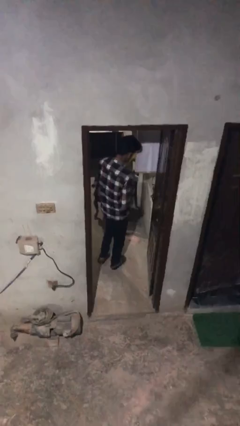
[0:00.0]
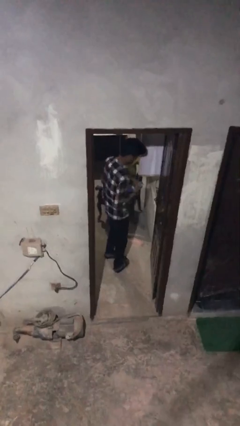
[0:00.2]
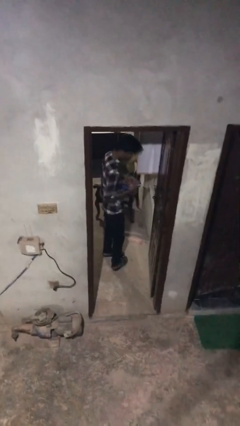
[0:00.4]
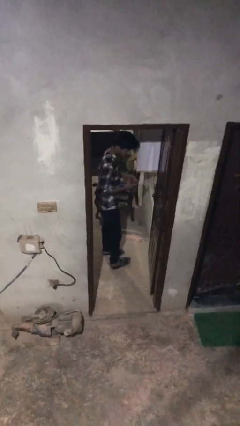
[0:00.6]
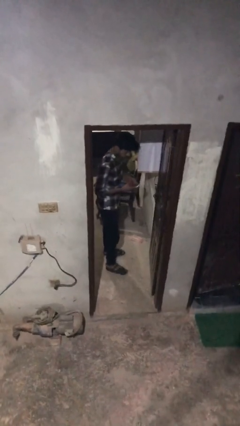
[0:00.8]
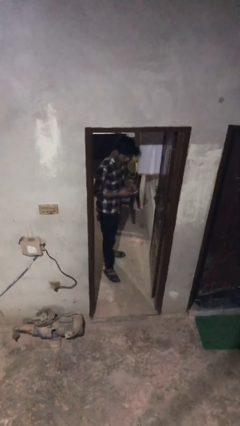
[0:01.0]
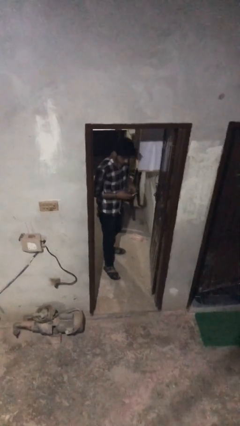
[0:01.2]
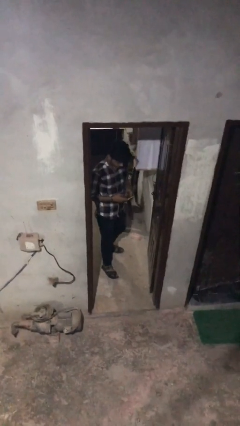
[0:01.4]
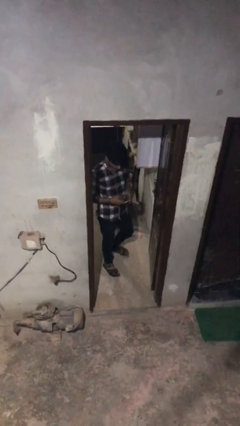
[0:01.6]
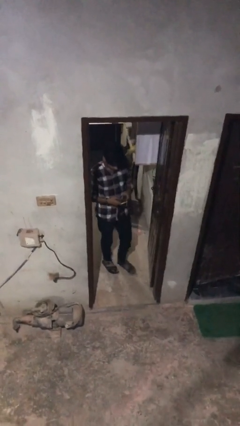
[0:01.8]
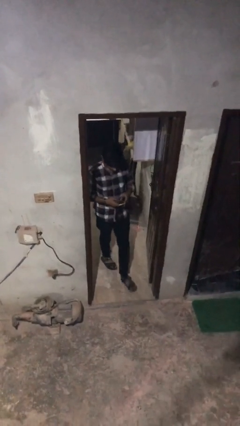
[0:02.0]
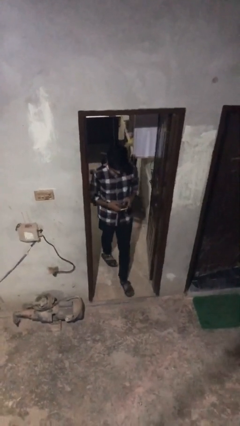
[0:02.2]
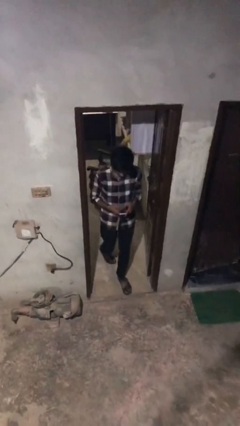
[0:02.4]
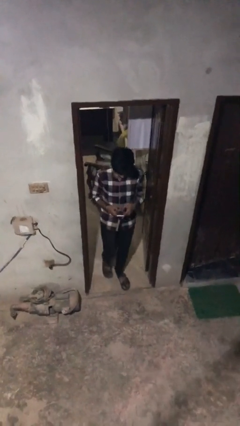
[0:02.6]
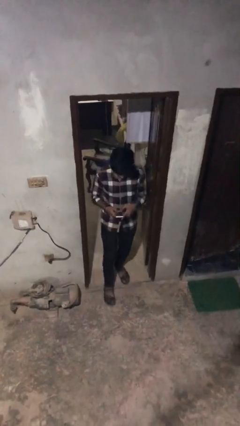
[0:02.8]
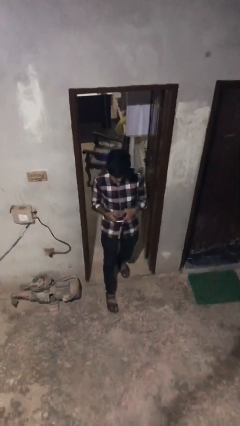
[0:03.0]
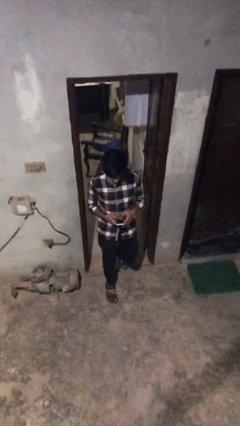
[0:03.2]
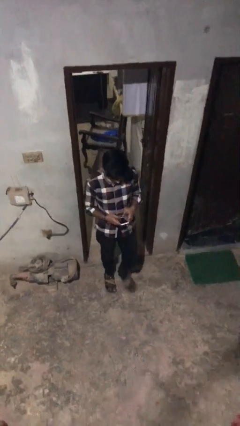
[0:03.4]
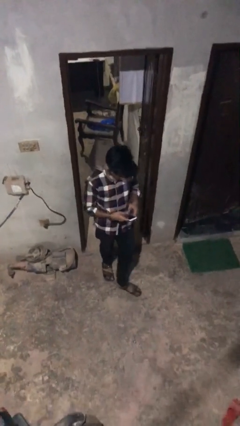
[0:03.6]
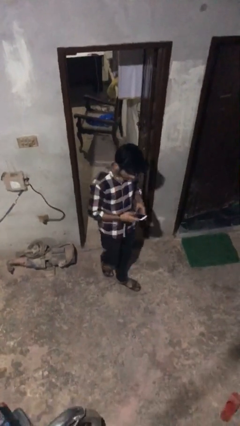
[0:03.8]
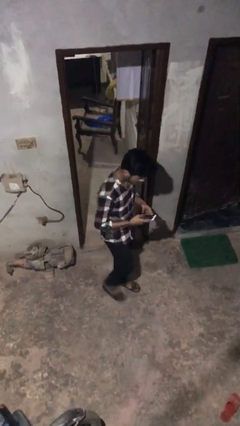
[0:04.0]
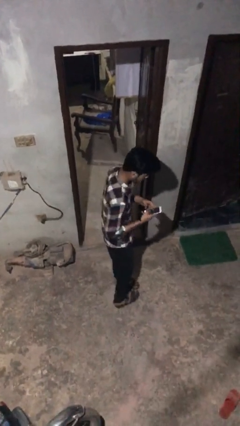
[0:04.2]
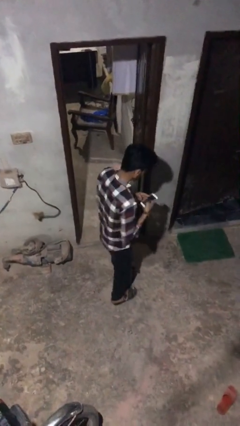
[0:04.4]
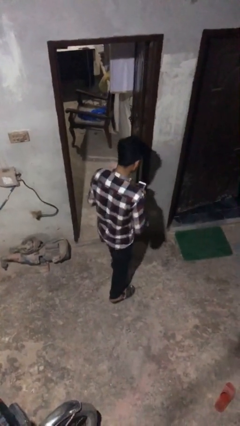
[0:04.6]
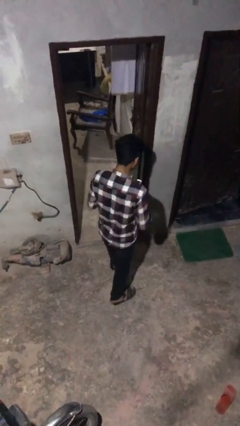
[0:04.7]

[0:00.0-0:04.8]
person enters scene through structure

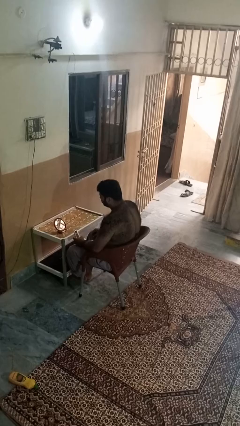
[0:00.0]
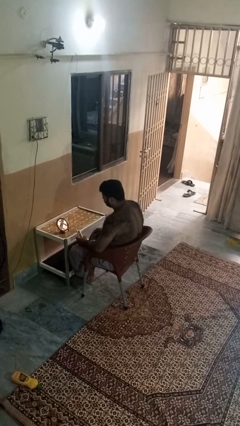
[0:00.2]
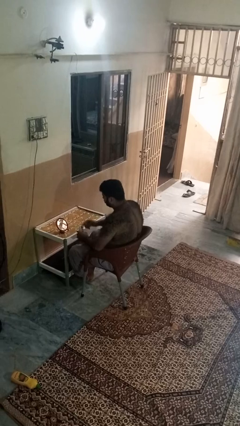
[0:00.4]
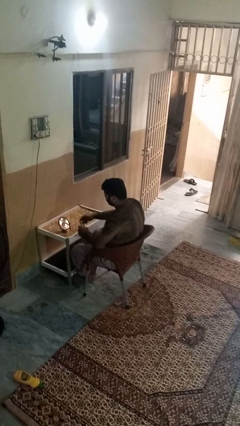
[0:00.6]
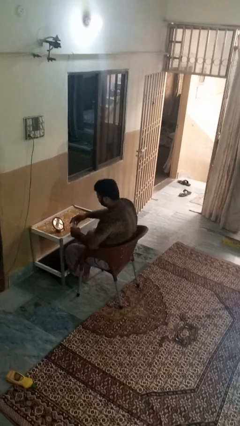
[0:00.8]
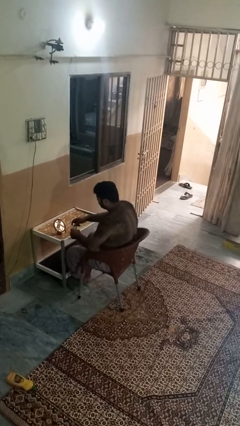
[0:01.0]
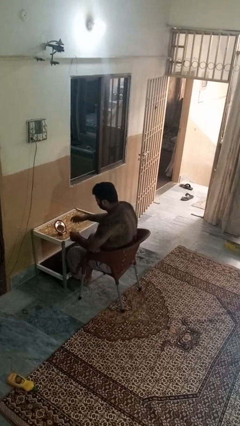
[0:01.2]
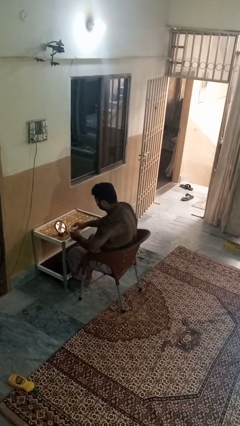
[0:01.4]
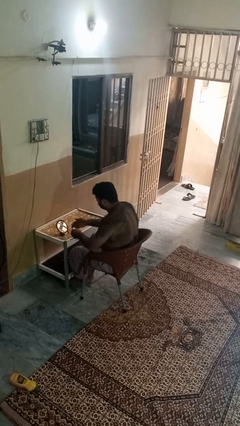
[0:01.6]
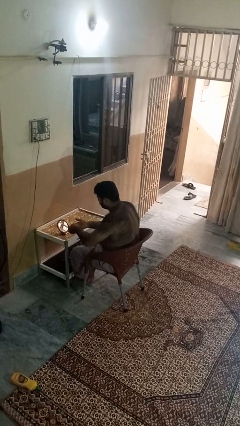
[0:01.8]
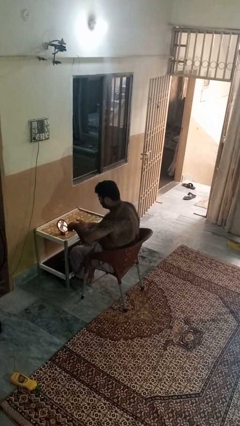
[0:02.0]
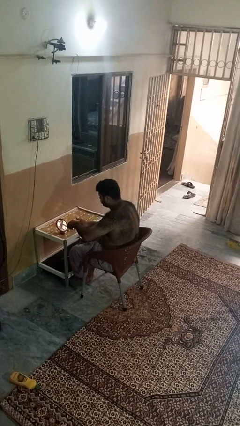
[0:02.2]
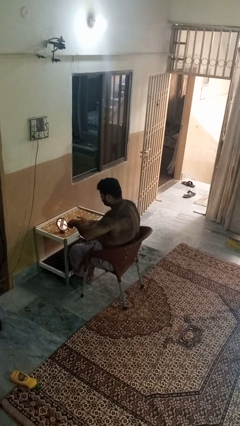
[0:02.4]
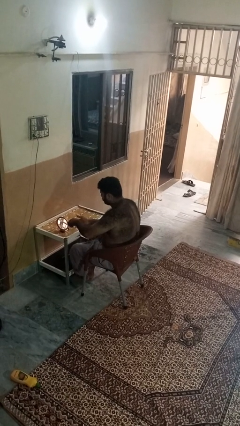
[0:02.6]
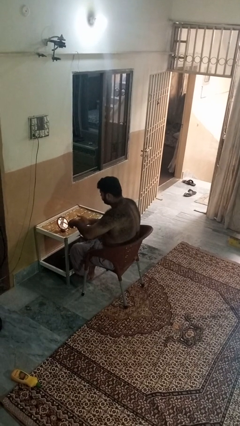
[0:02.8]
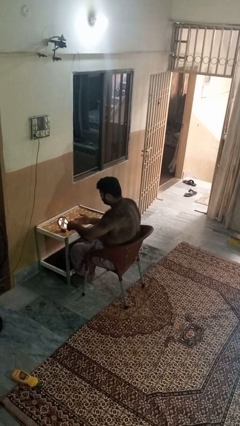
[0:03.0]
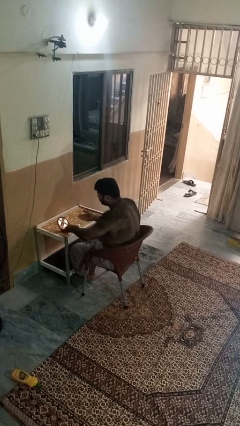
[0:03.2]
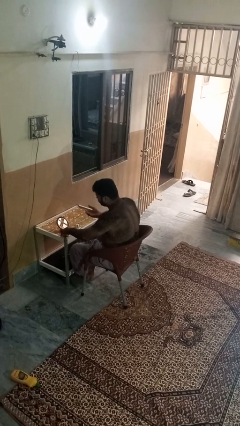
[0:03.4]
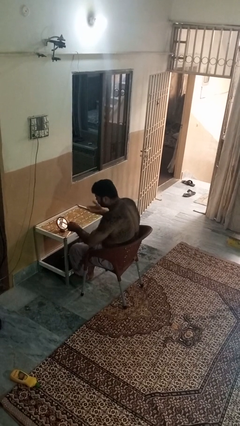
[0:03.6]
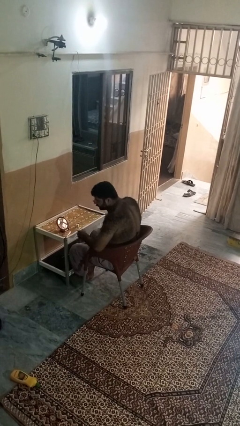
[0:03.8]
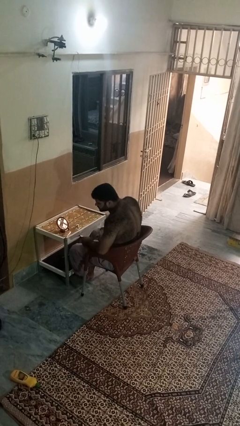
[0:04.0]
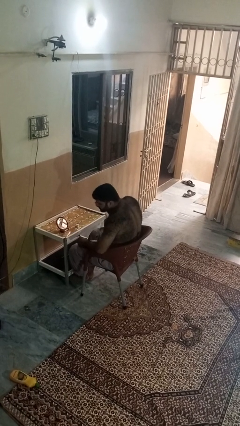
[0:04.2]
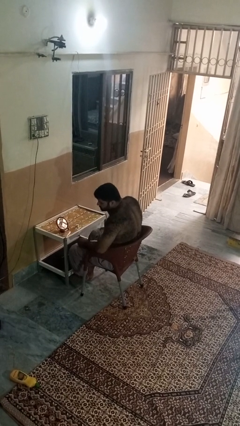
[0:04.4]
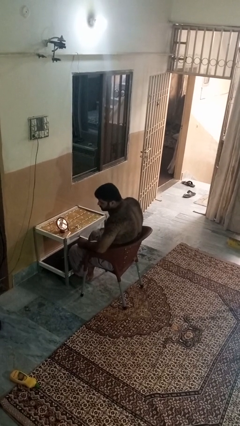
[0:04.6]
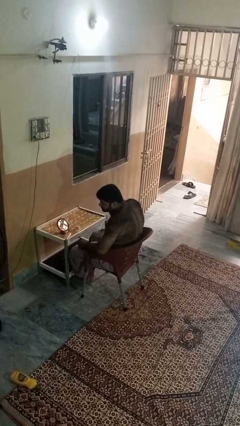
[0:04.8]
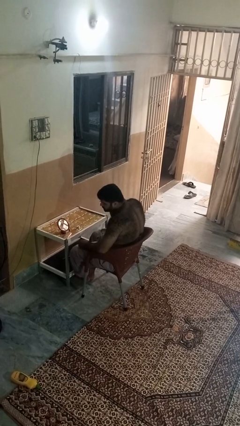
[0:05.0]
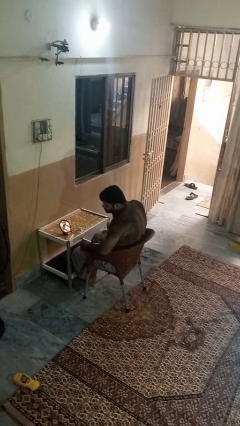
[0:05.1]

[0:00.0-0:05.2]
person applies foundation makeup

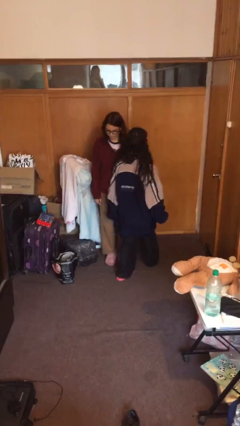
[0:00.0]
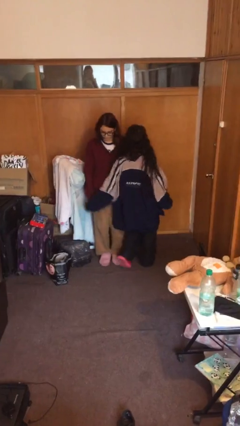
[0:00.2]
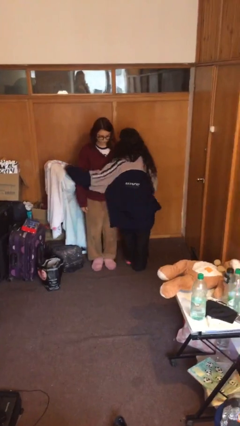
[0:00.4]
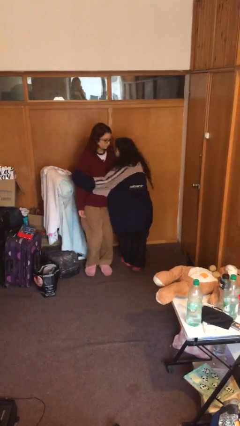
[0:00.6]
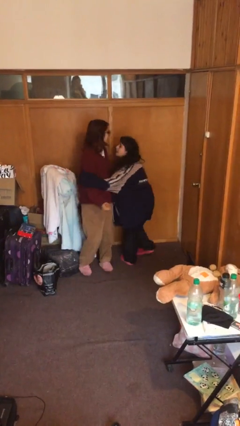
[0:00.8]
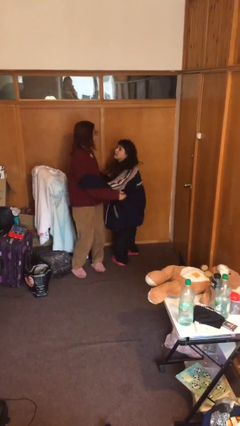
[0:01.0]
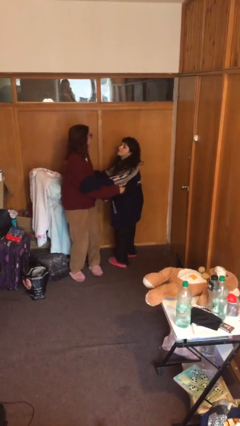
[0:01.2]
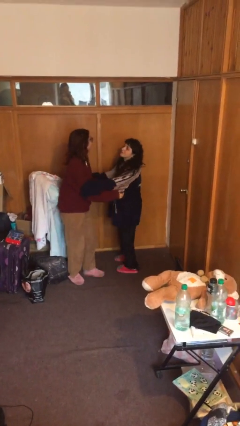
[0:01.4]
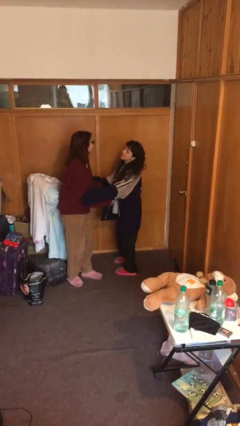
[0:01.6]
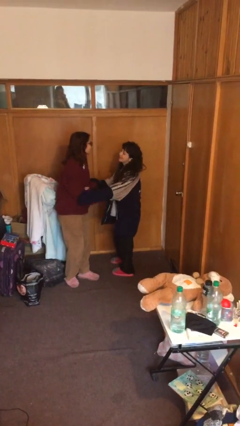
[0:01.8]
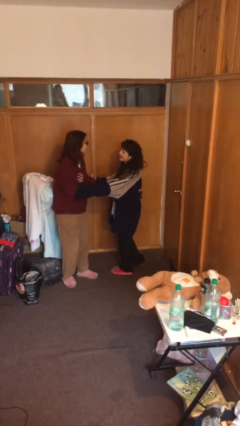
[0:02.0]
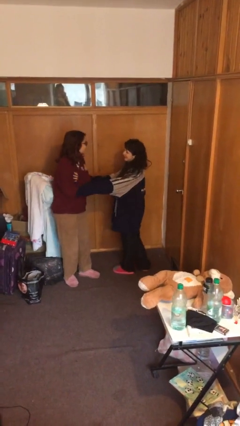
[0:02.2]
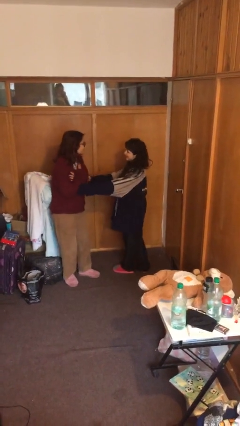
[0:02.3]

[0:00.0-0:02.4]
person bumps into person

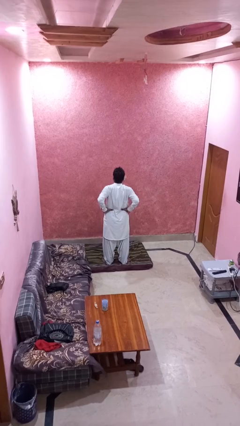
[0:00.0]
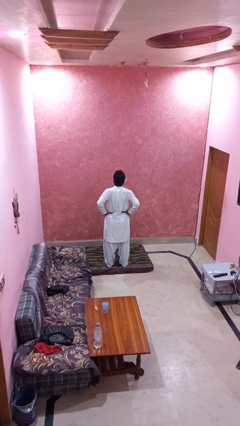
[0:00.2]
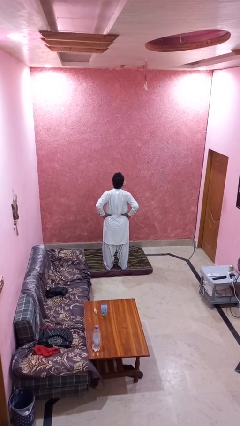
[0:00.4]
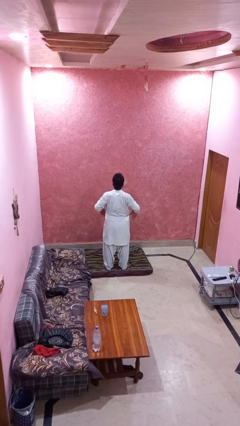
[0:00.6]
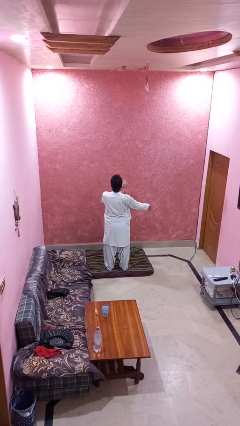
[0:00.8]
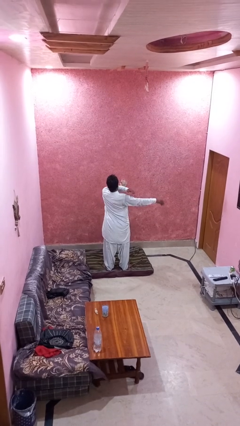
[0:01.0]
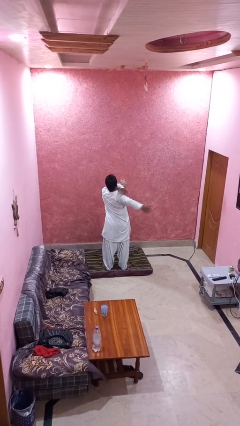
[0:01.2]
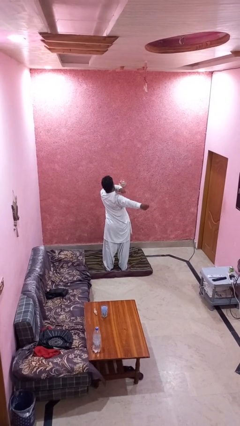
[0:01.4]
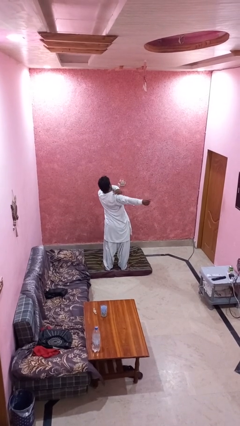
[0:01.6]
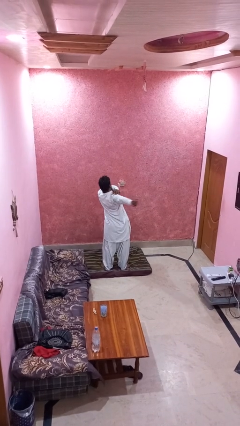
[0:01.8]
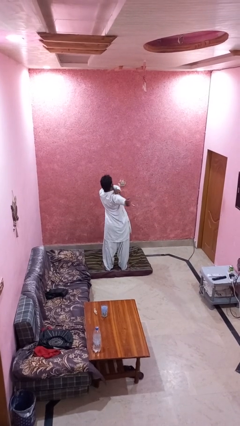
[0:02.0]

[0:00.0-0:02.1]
person stretches arms to side

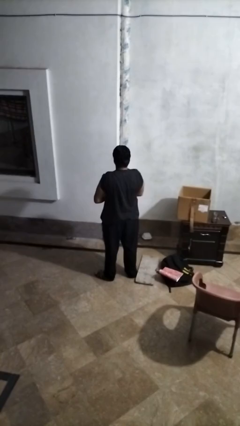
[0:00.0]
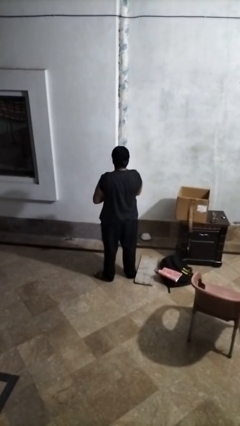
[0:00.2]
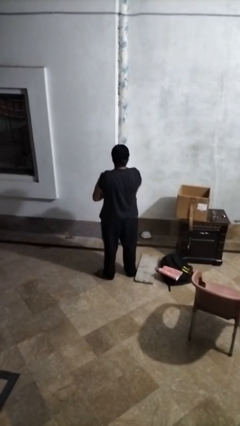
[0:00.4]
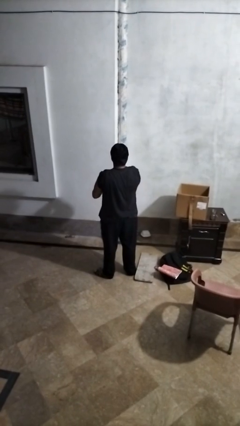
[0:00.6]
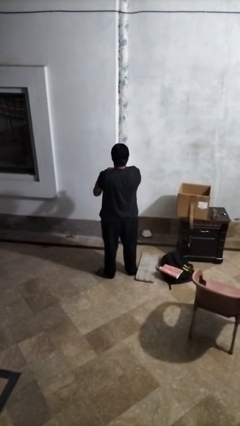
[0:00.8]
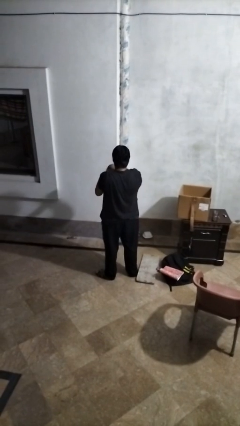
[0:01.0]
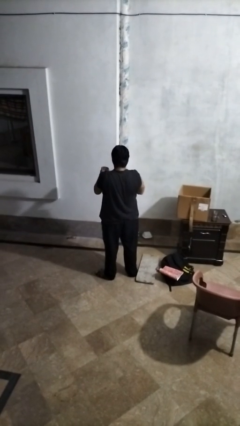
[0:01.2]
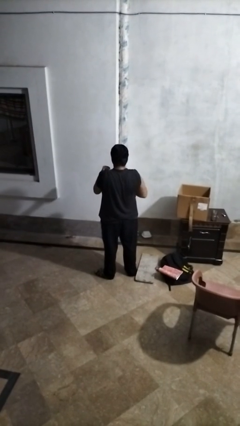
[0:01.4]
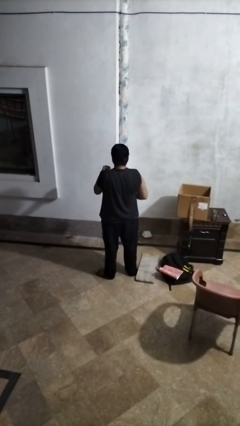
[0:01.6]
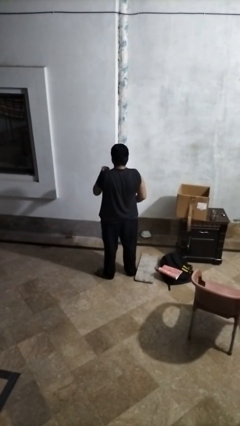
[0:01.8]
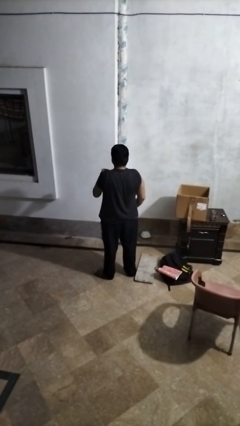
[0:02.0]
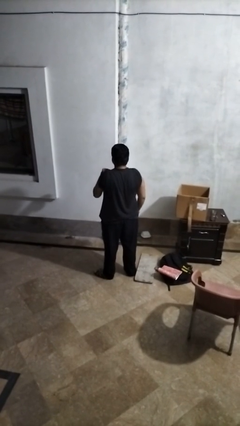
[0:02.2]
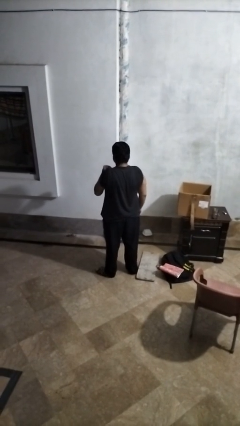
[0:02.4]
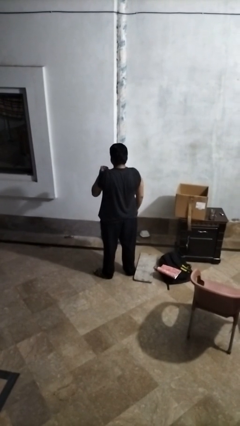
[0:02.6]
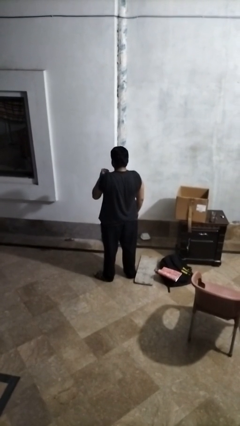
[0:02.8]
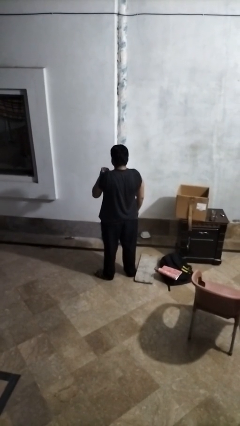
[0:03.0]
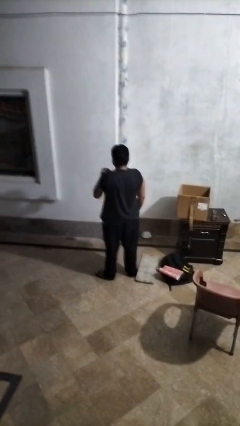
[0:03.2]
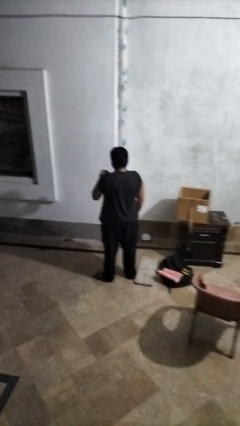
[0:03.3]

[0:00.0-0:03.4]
person opens beverage can

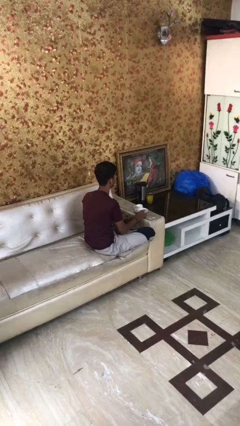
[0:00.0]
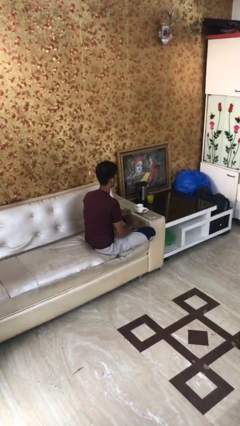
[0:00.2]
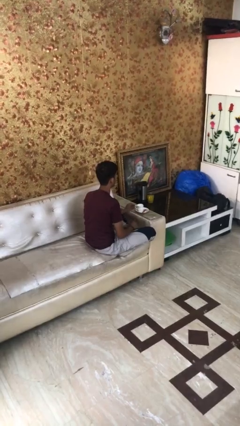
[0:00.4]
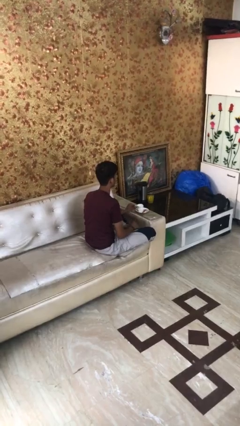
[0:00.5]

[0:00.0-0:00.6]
person stirs mug
